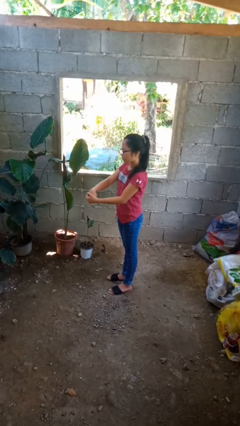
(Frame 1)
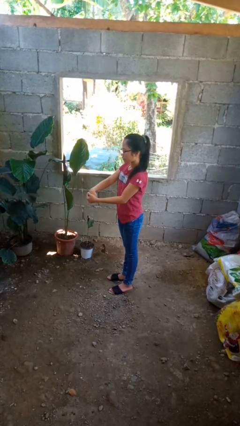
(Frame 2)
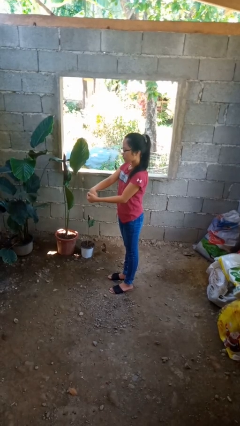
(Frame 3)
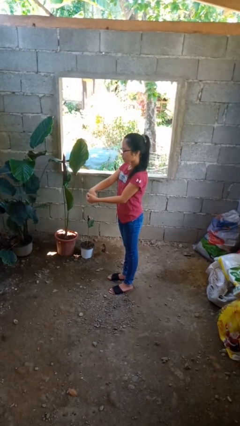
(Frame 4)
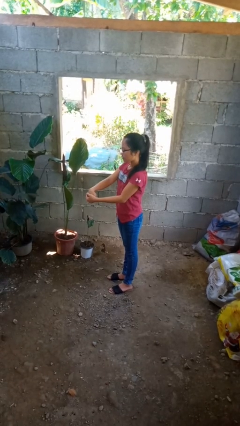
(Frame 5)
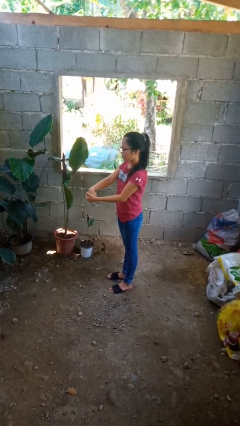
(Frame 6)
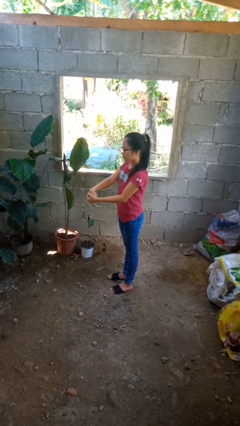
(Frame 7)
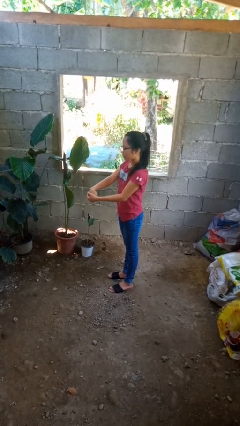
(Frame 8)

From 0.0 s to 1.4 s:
person cracks knuckles

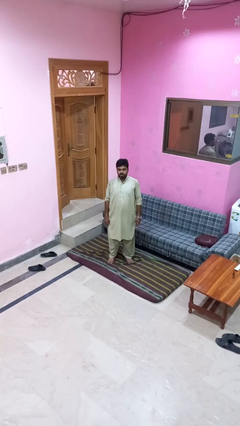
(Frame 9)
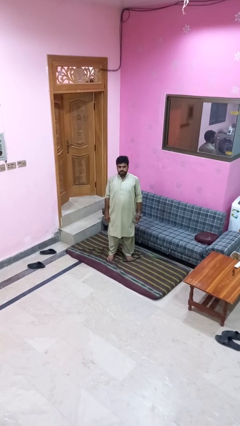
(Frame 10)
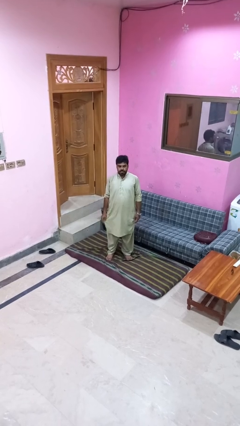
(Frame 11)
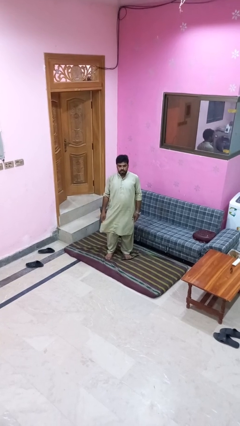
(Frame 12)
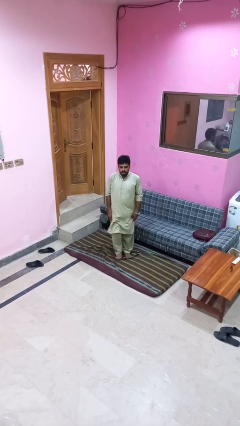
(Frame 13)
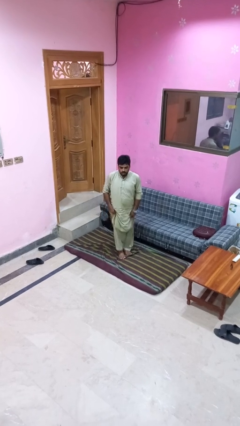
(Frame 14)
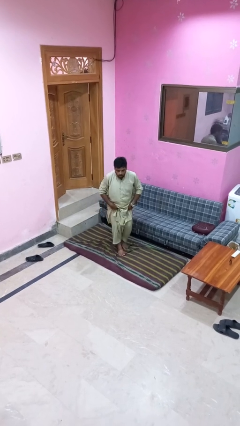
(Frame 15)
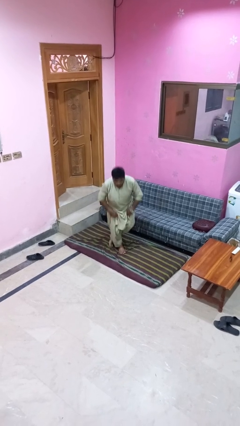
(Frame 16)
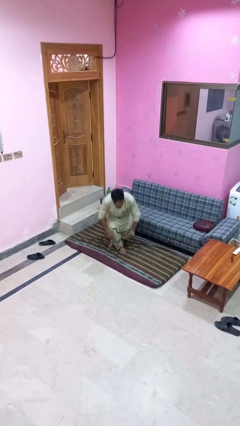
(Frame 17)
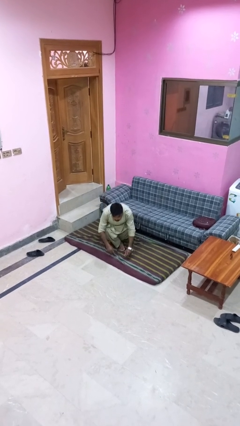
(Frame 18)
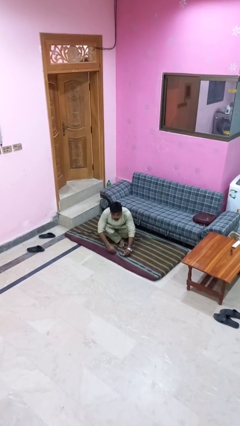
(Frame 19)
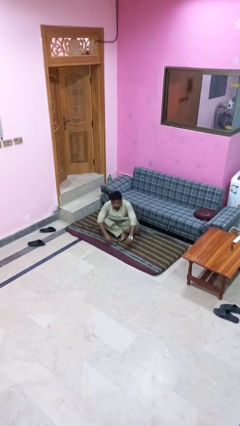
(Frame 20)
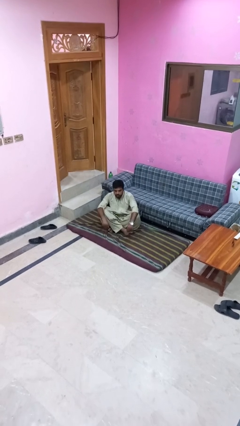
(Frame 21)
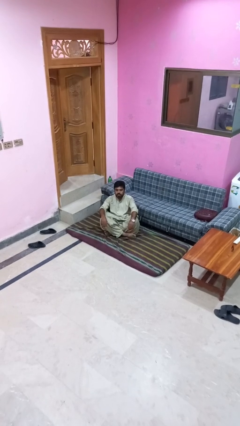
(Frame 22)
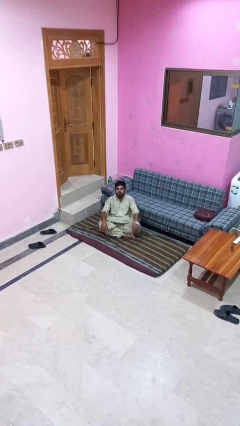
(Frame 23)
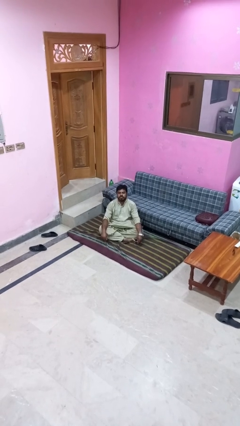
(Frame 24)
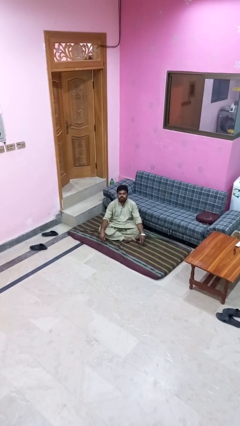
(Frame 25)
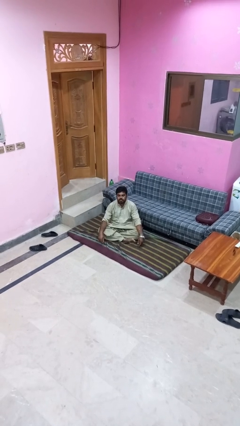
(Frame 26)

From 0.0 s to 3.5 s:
person sits crisscross

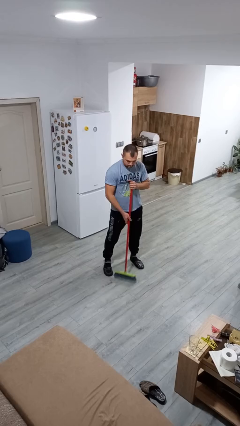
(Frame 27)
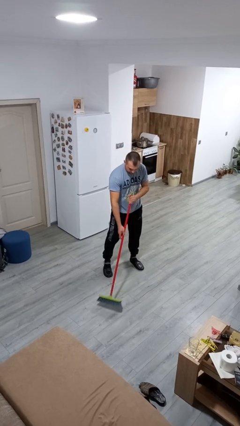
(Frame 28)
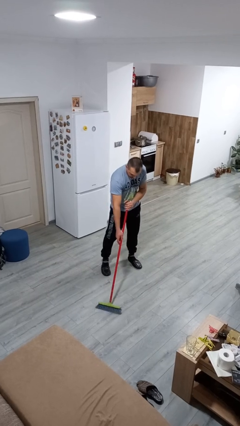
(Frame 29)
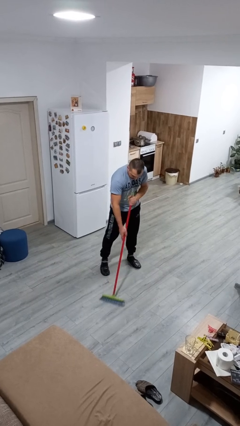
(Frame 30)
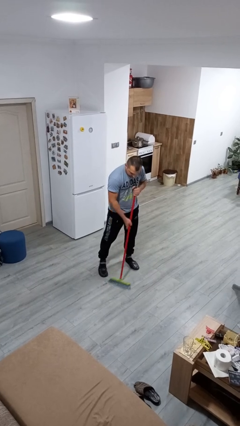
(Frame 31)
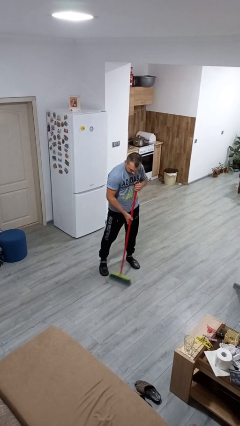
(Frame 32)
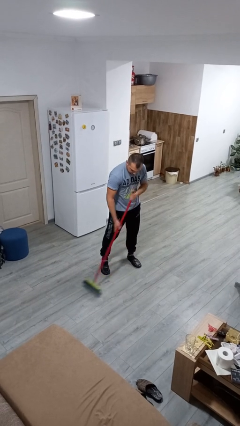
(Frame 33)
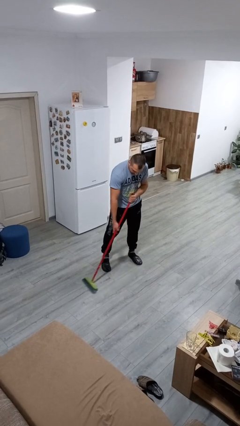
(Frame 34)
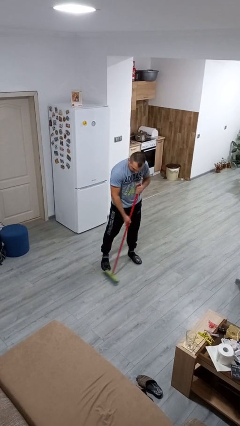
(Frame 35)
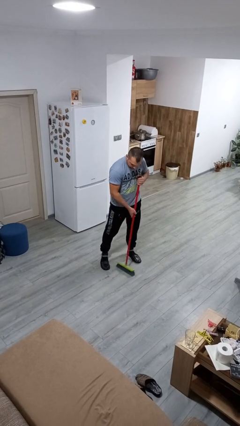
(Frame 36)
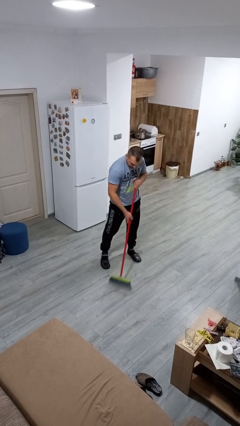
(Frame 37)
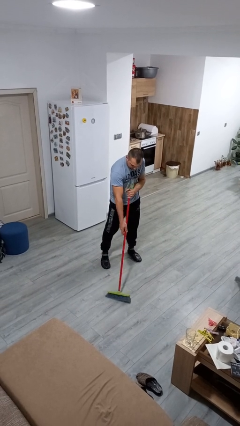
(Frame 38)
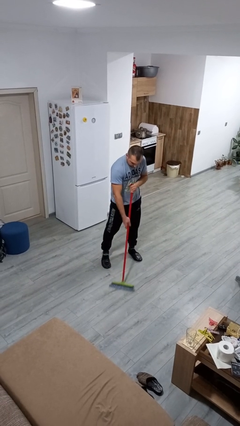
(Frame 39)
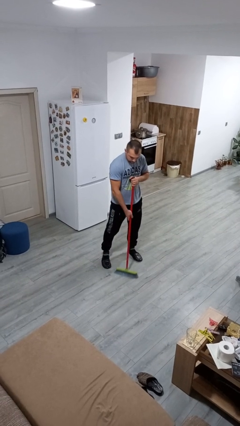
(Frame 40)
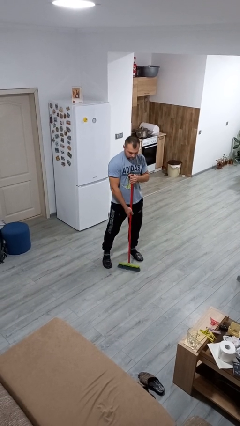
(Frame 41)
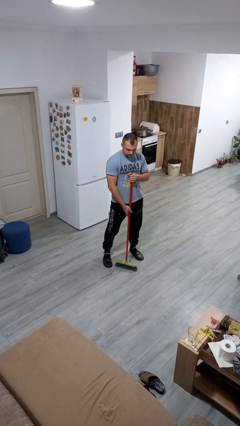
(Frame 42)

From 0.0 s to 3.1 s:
person sweeps floor

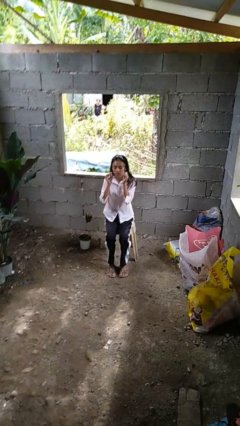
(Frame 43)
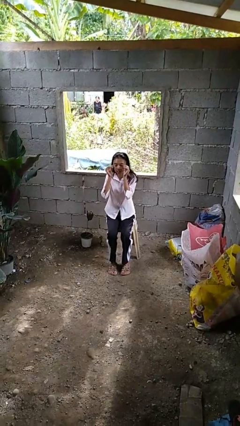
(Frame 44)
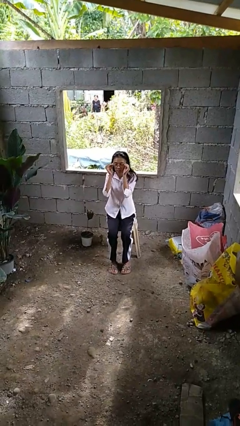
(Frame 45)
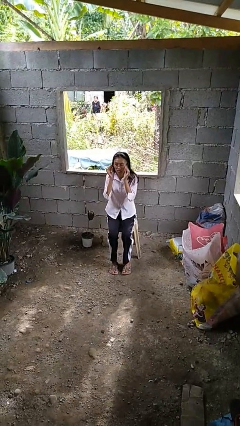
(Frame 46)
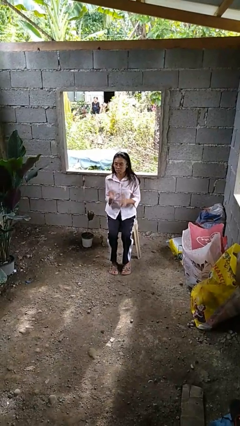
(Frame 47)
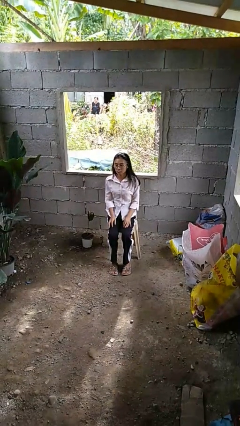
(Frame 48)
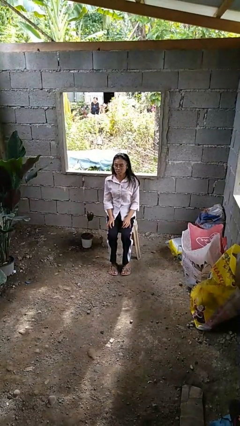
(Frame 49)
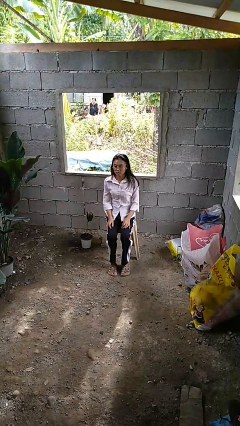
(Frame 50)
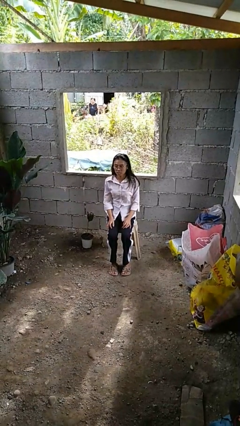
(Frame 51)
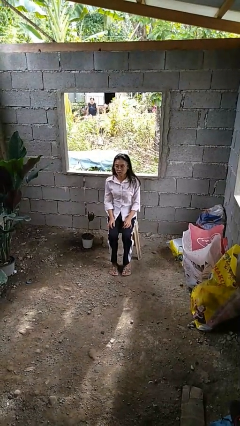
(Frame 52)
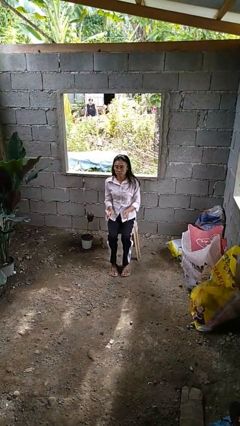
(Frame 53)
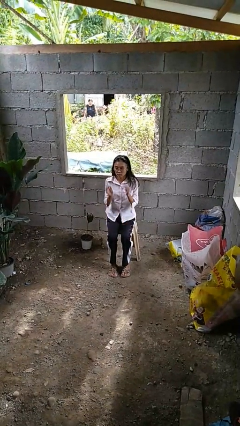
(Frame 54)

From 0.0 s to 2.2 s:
person puts on glasses

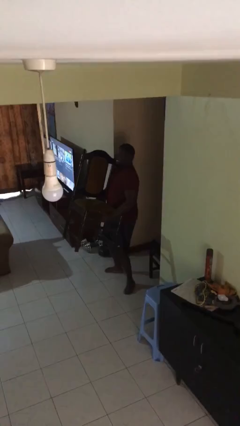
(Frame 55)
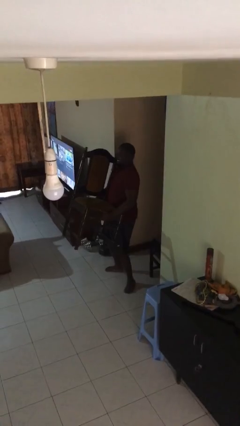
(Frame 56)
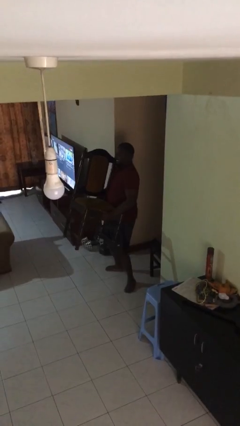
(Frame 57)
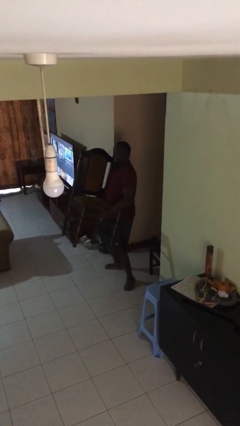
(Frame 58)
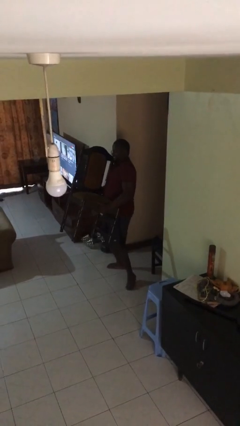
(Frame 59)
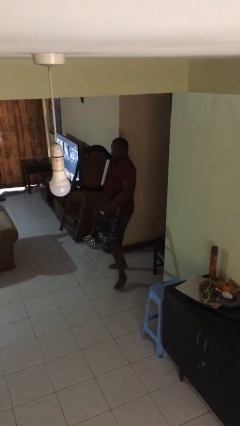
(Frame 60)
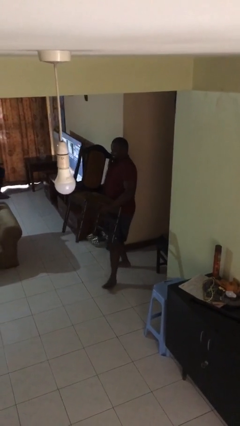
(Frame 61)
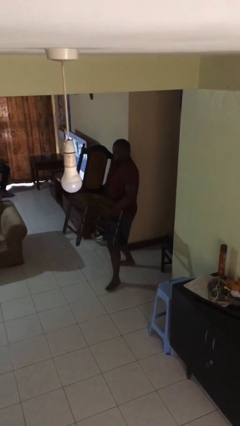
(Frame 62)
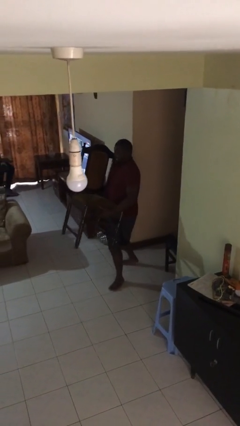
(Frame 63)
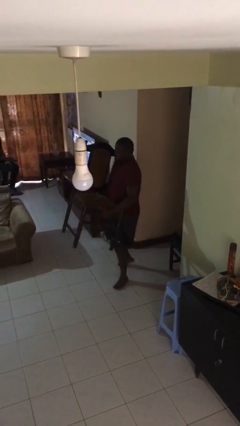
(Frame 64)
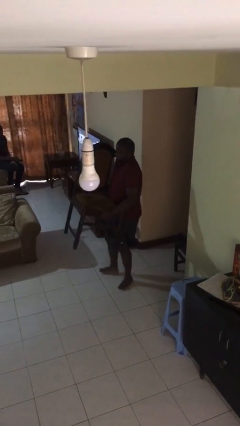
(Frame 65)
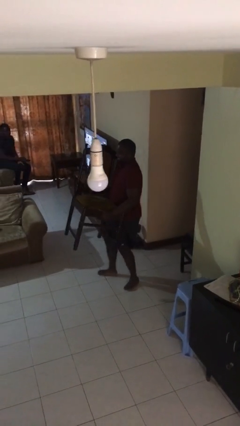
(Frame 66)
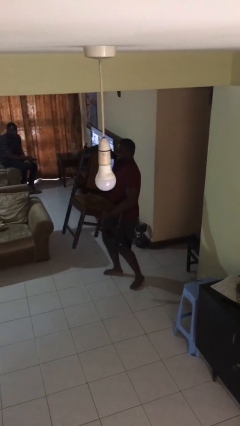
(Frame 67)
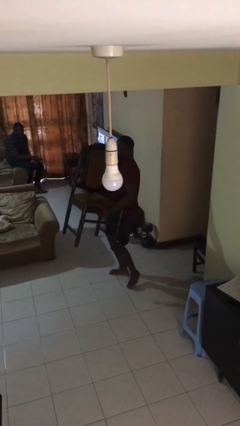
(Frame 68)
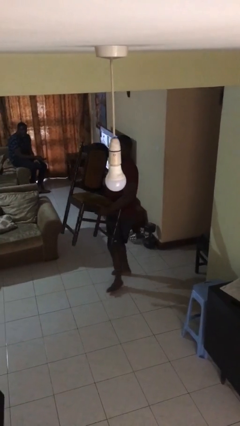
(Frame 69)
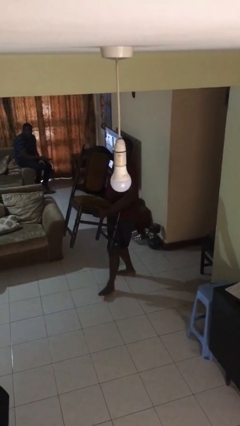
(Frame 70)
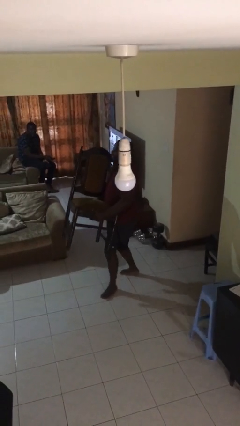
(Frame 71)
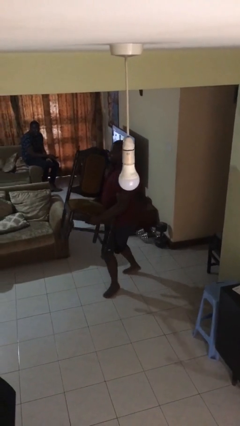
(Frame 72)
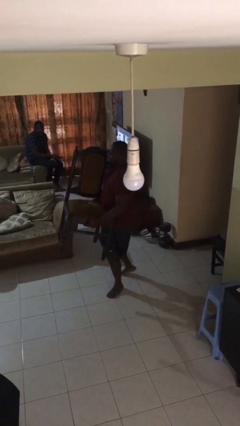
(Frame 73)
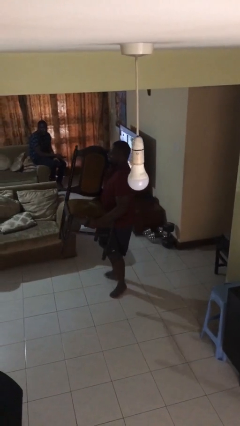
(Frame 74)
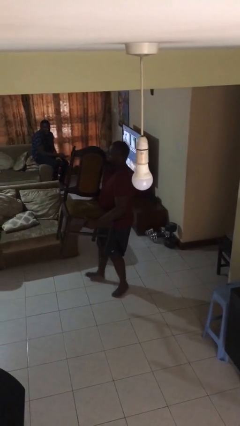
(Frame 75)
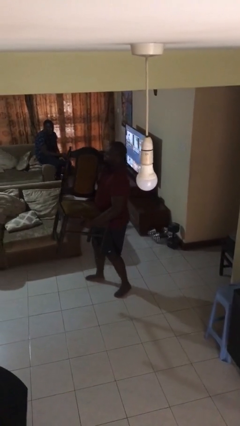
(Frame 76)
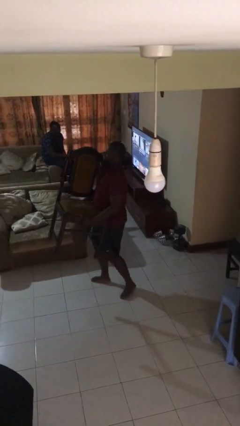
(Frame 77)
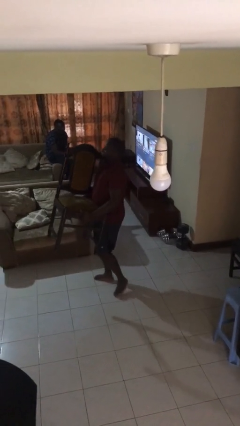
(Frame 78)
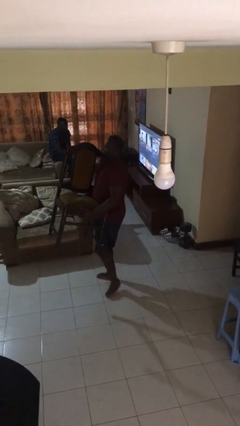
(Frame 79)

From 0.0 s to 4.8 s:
person carries heavy object

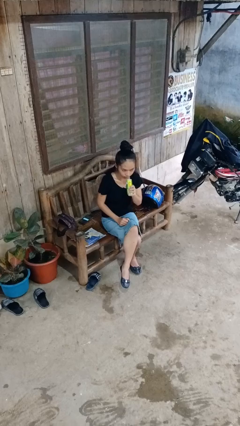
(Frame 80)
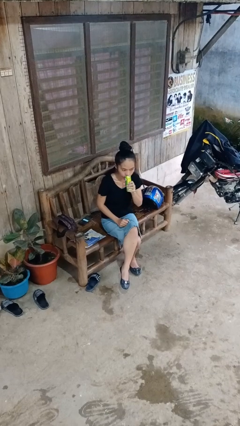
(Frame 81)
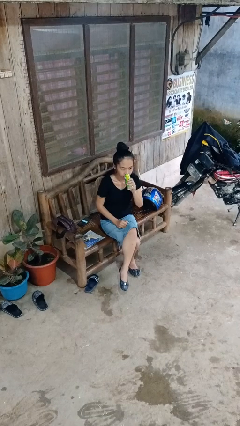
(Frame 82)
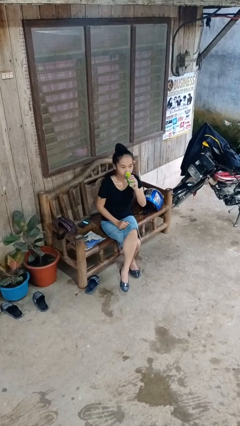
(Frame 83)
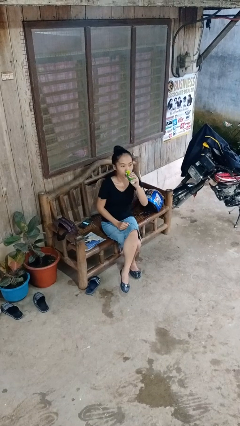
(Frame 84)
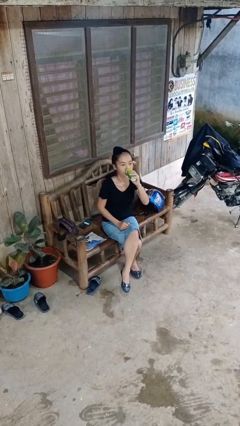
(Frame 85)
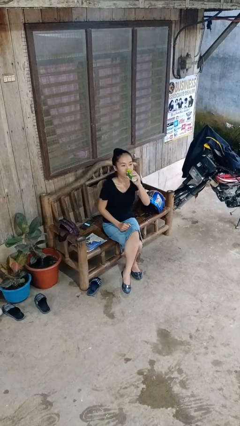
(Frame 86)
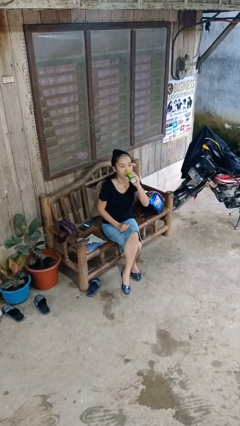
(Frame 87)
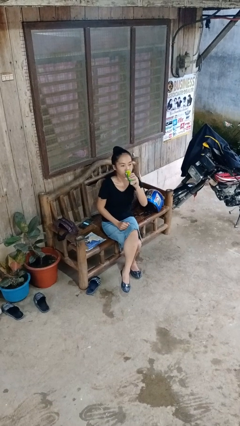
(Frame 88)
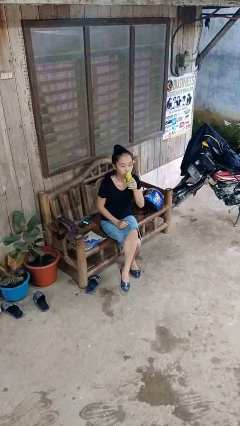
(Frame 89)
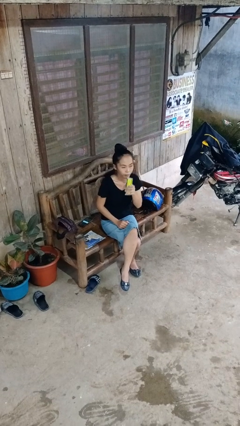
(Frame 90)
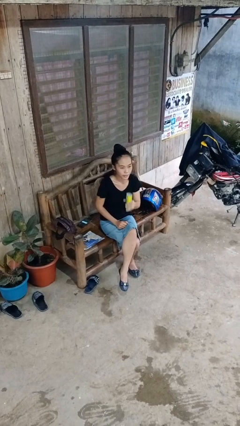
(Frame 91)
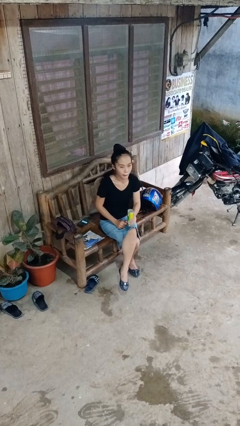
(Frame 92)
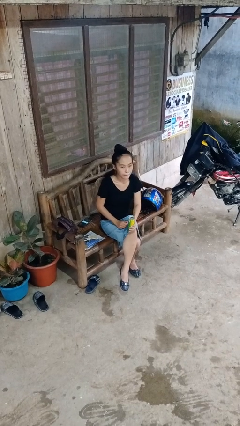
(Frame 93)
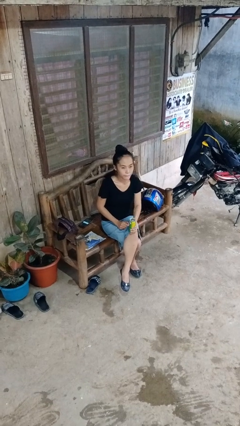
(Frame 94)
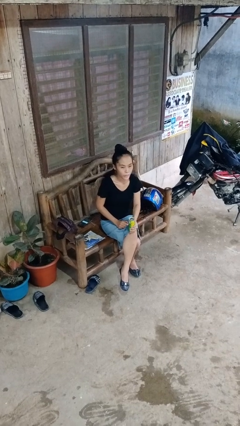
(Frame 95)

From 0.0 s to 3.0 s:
person drinks from beverage can
